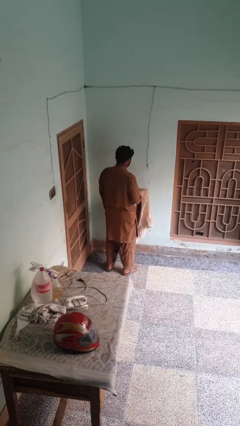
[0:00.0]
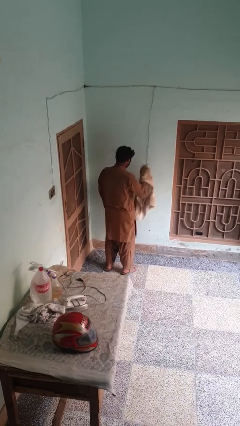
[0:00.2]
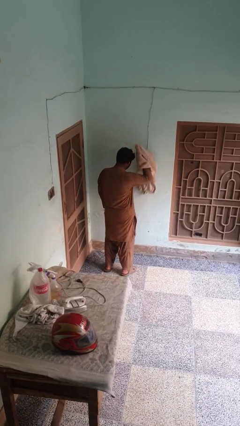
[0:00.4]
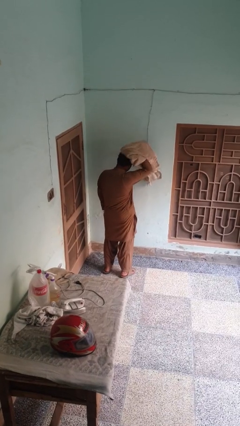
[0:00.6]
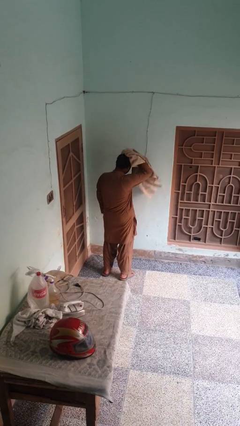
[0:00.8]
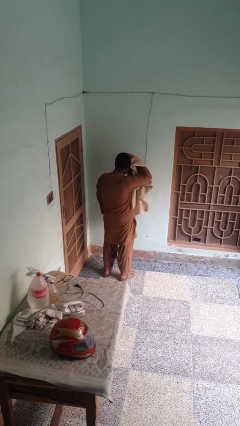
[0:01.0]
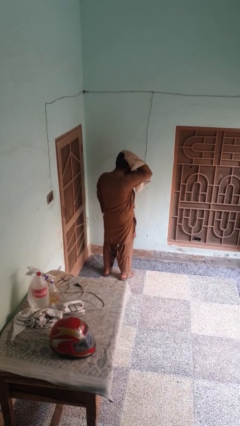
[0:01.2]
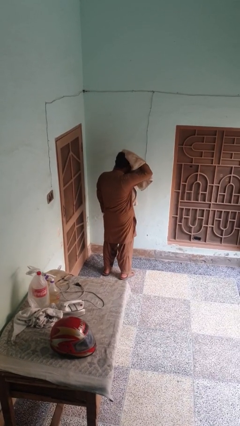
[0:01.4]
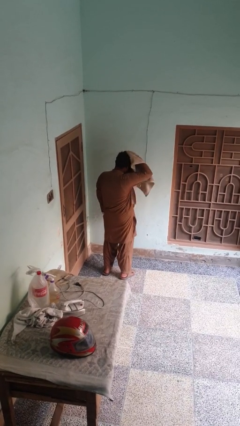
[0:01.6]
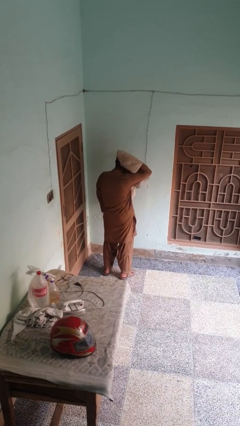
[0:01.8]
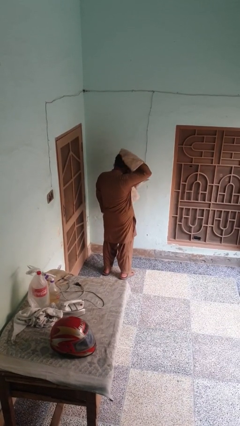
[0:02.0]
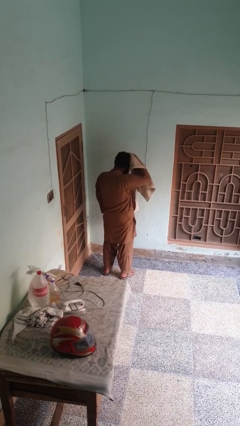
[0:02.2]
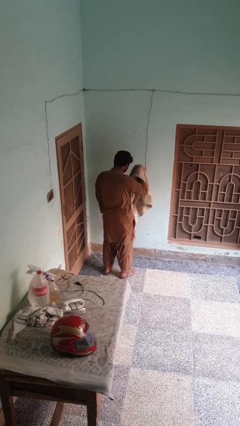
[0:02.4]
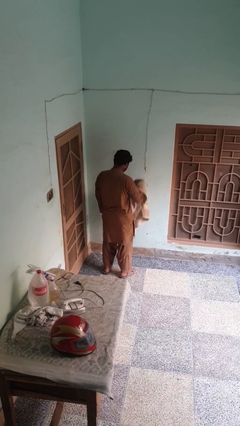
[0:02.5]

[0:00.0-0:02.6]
person dries hair with towel

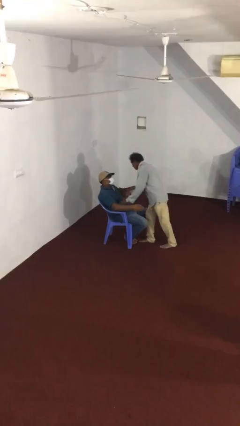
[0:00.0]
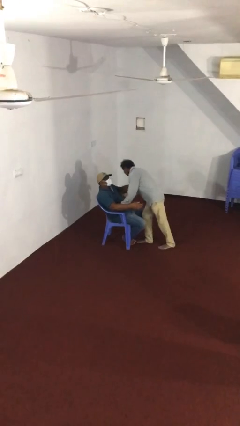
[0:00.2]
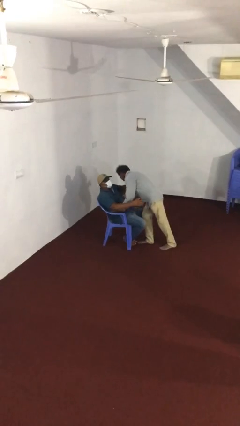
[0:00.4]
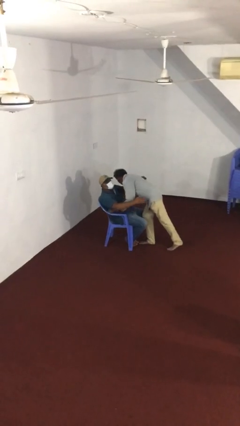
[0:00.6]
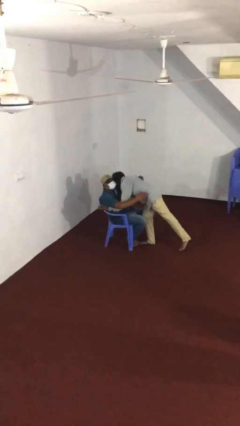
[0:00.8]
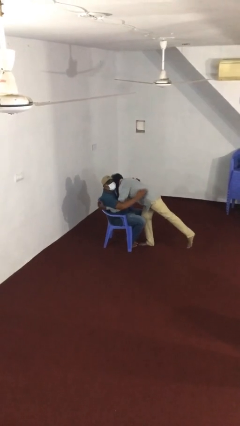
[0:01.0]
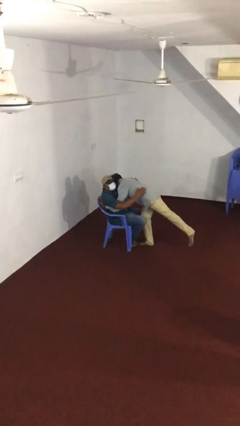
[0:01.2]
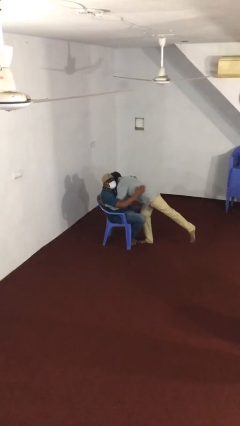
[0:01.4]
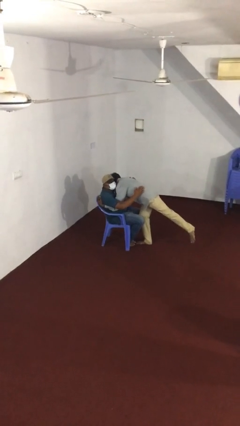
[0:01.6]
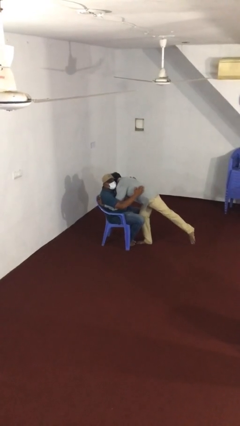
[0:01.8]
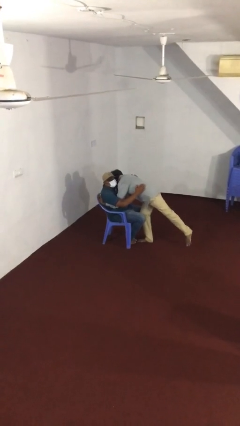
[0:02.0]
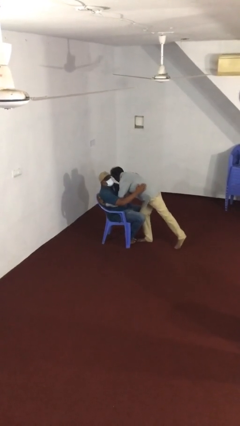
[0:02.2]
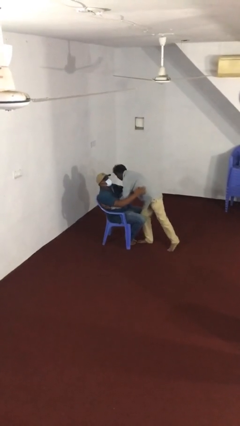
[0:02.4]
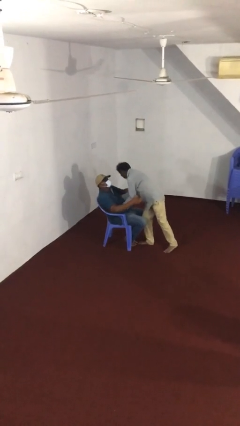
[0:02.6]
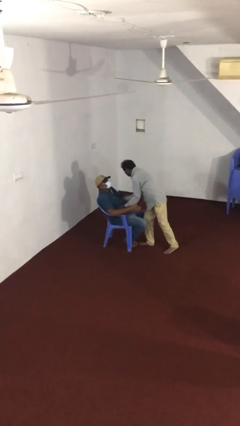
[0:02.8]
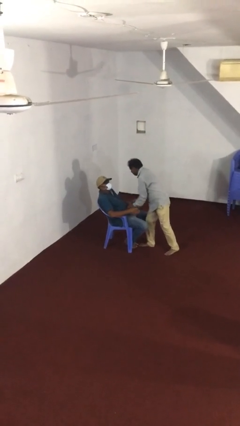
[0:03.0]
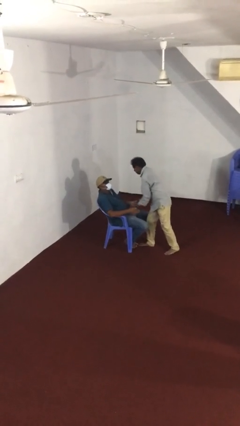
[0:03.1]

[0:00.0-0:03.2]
person embraces person

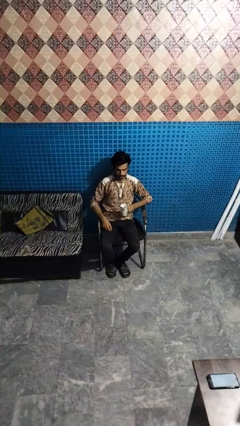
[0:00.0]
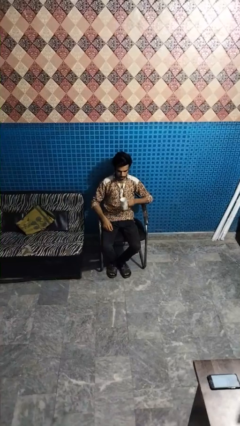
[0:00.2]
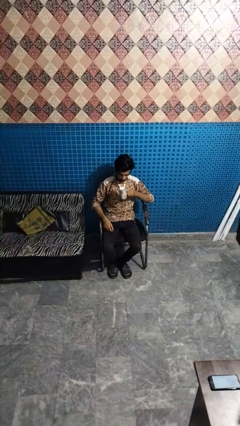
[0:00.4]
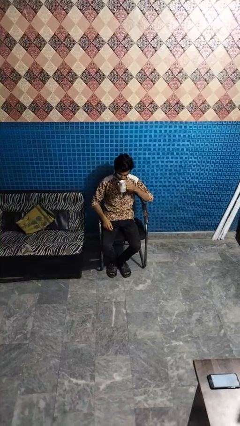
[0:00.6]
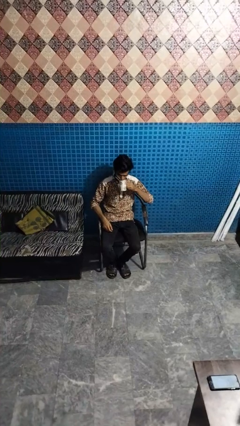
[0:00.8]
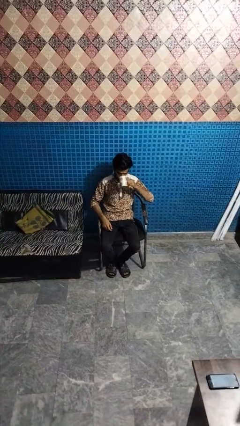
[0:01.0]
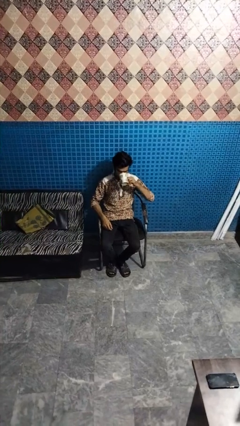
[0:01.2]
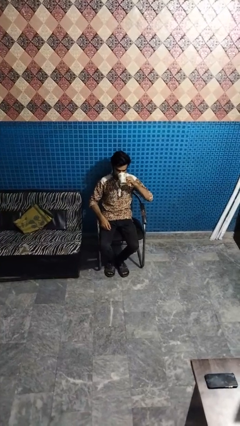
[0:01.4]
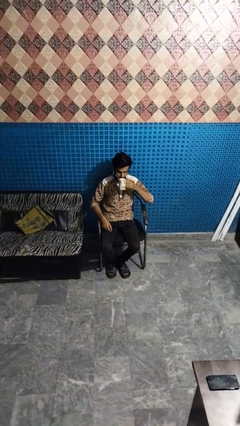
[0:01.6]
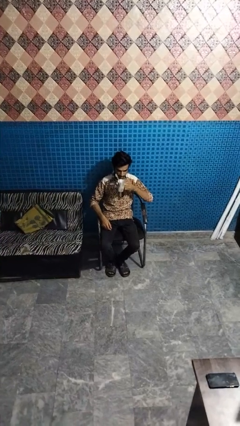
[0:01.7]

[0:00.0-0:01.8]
person drinks from mug

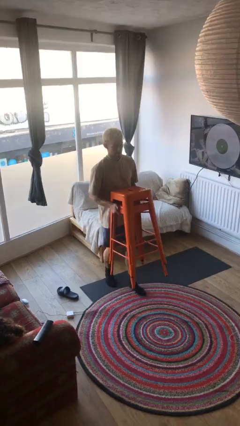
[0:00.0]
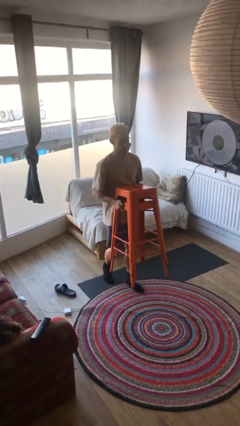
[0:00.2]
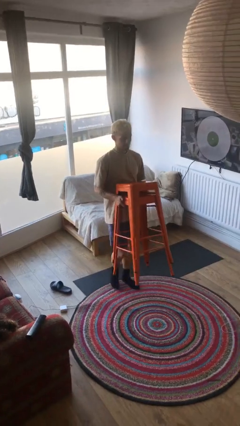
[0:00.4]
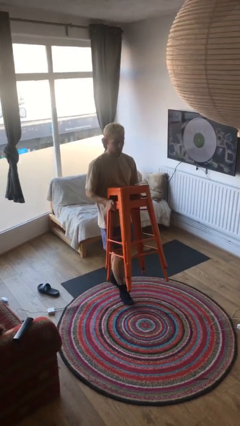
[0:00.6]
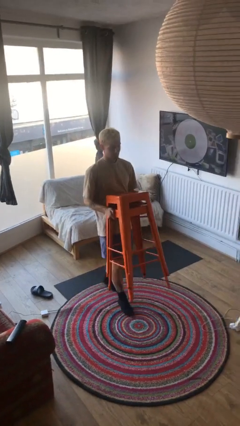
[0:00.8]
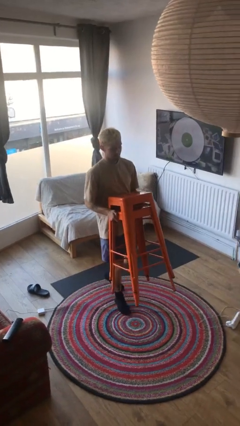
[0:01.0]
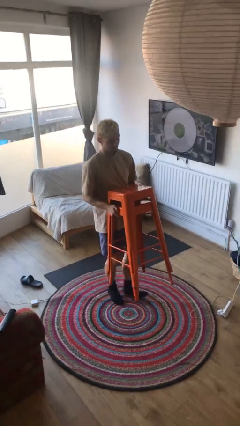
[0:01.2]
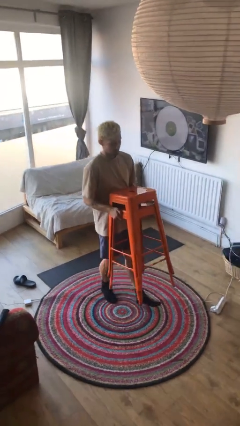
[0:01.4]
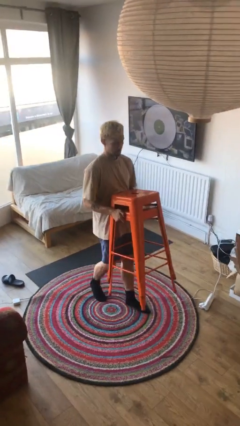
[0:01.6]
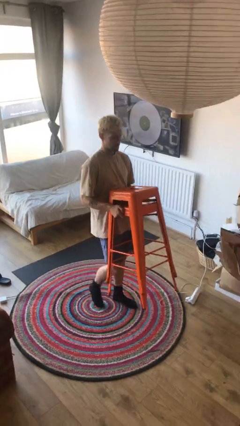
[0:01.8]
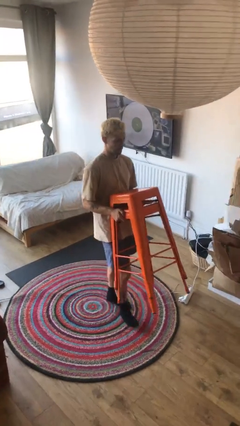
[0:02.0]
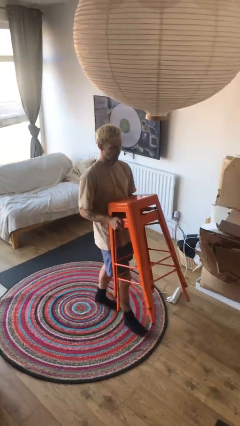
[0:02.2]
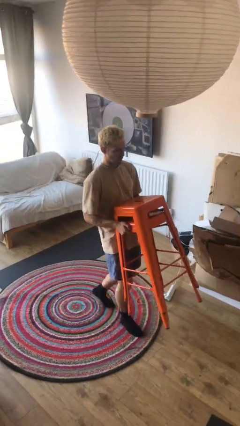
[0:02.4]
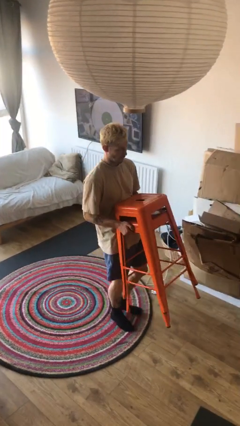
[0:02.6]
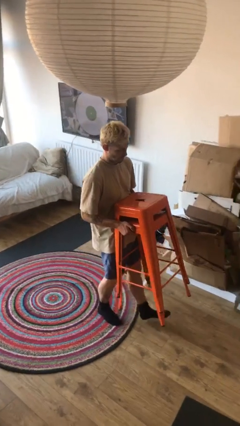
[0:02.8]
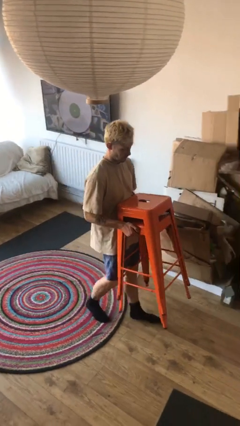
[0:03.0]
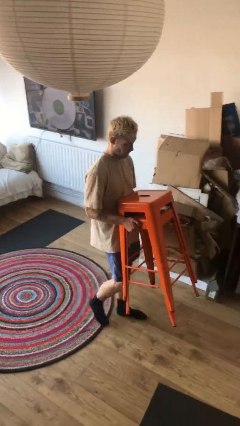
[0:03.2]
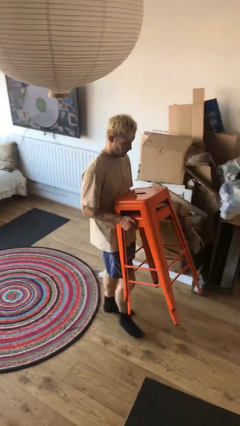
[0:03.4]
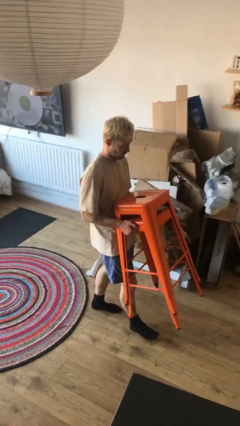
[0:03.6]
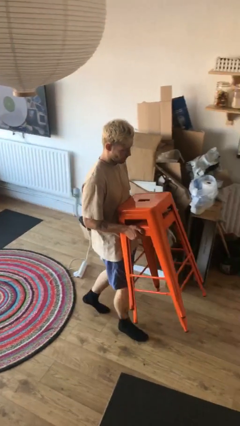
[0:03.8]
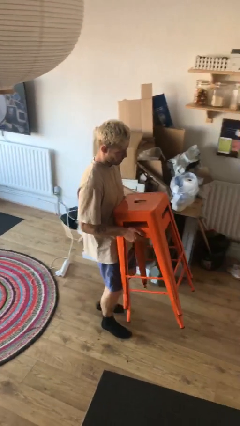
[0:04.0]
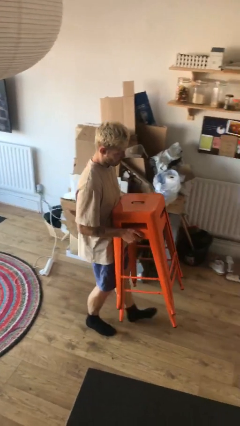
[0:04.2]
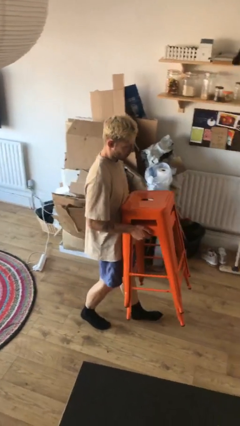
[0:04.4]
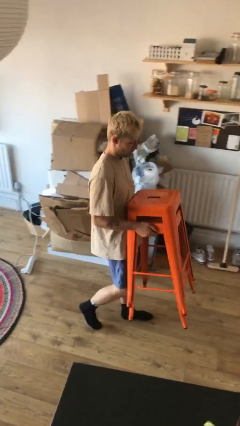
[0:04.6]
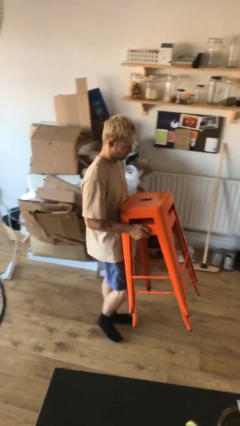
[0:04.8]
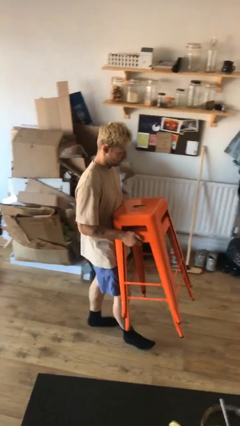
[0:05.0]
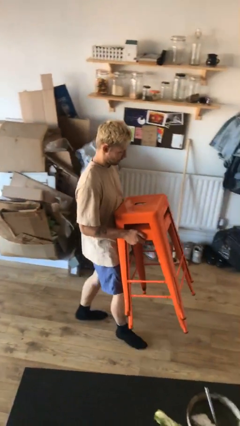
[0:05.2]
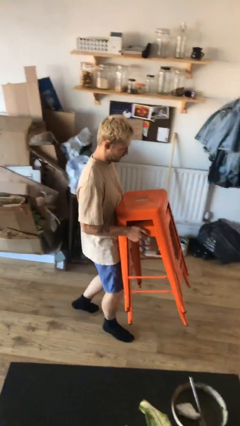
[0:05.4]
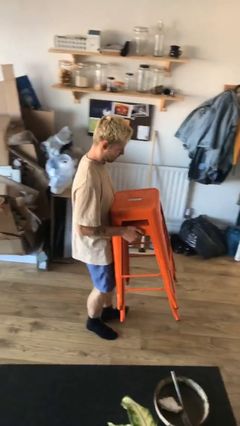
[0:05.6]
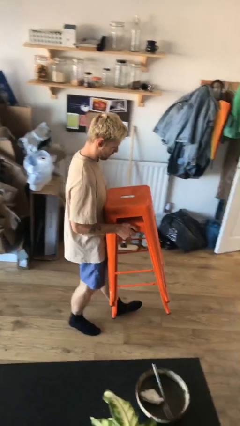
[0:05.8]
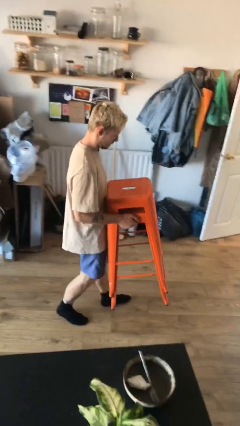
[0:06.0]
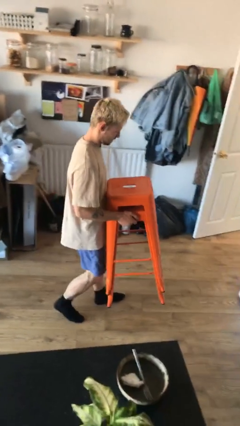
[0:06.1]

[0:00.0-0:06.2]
person carries heavy object

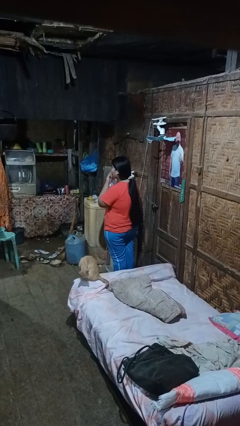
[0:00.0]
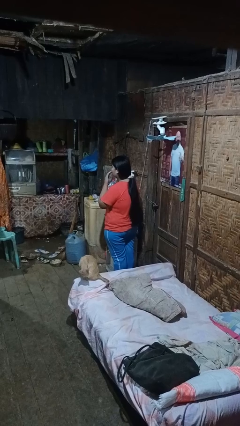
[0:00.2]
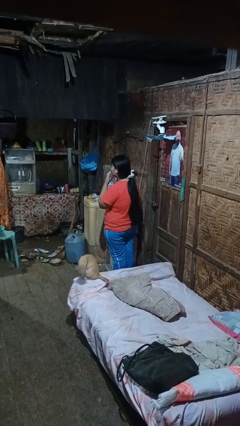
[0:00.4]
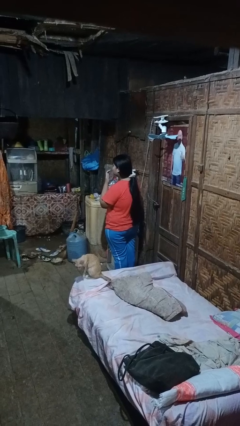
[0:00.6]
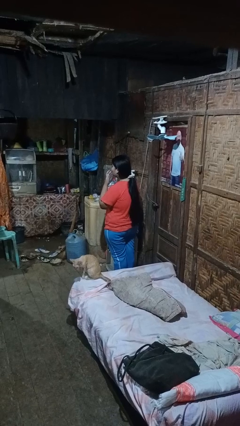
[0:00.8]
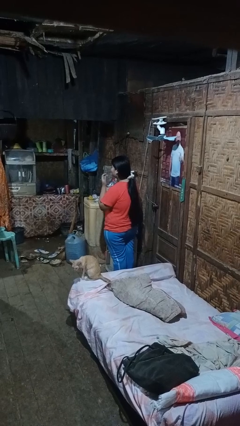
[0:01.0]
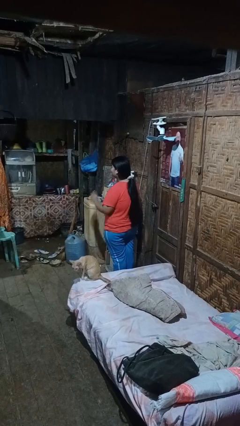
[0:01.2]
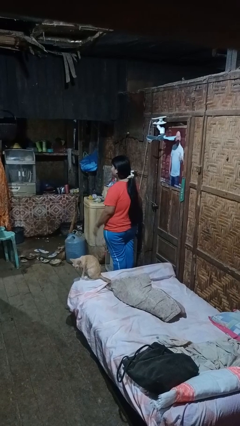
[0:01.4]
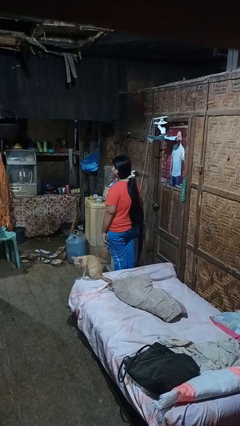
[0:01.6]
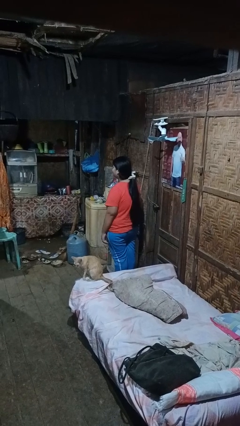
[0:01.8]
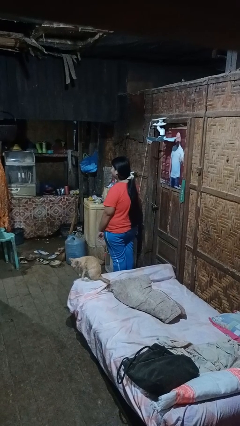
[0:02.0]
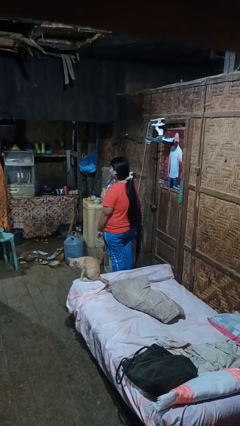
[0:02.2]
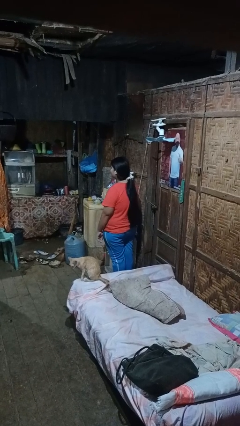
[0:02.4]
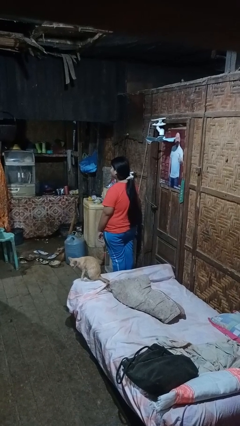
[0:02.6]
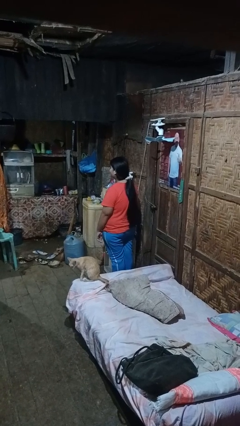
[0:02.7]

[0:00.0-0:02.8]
person licks fingers

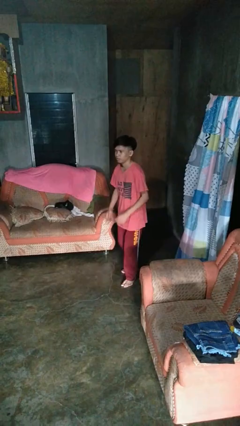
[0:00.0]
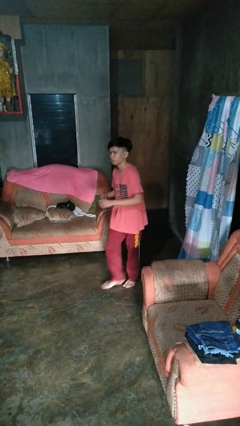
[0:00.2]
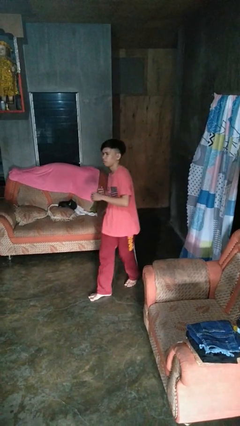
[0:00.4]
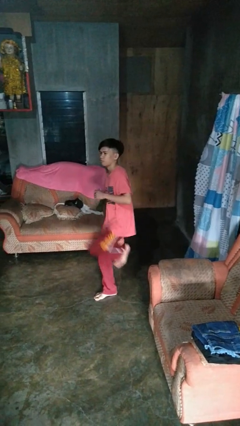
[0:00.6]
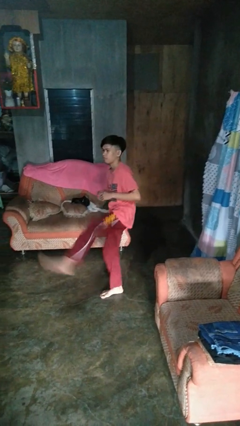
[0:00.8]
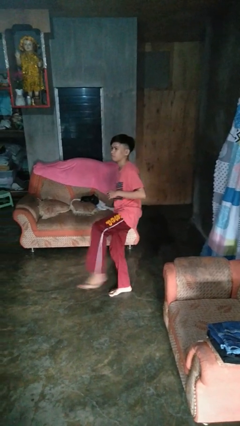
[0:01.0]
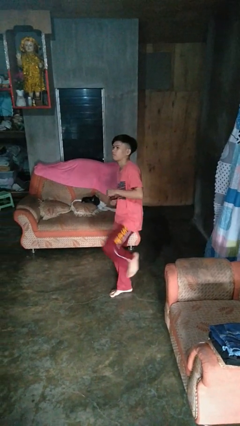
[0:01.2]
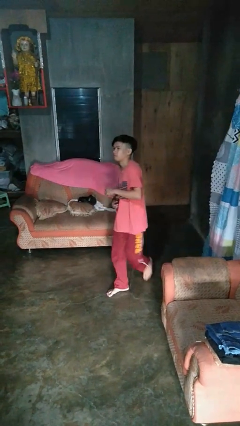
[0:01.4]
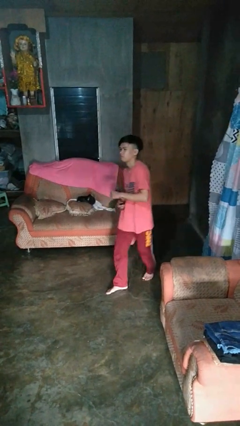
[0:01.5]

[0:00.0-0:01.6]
person karate kicks
